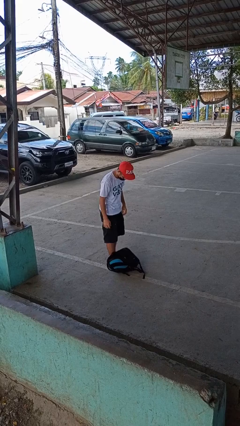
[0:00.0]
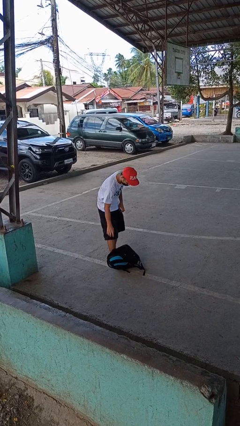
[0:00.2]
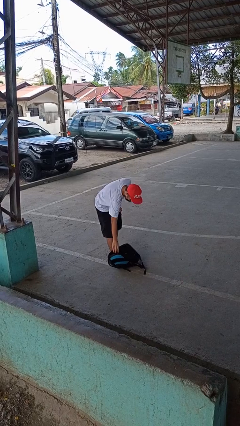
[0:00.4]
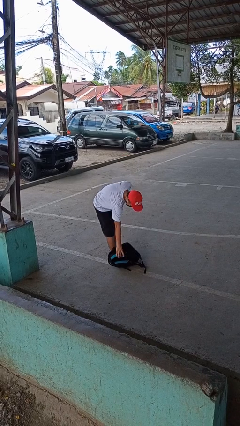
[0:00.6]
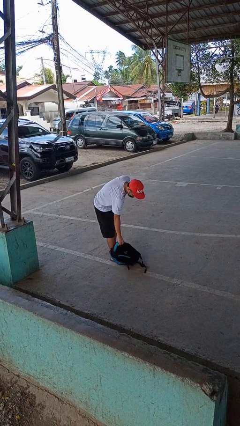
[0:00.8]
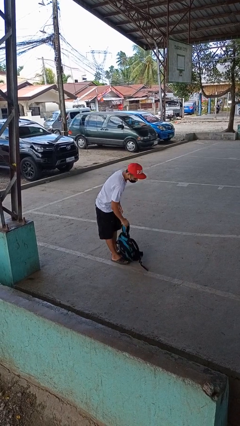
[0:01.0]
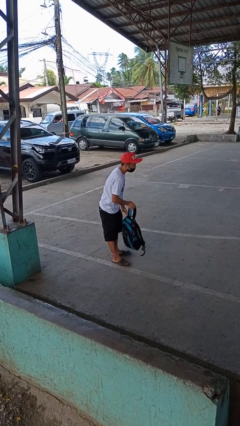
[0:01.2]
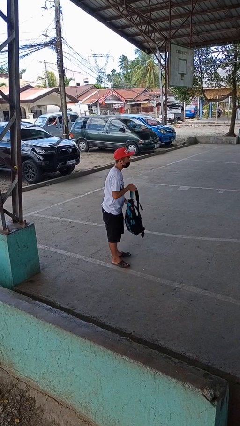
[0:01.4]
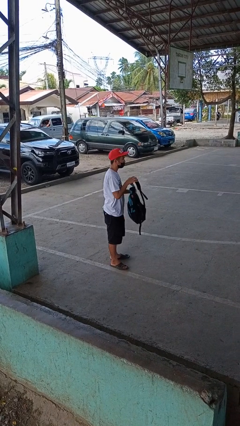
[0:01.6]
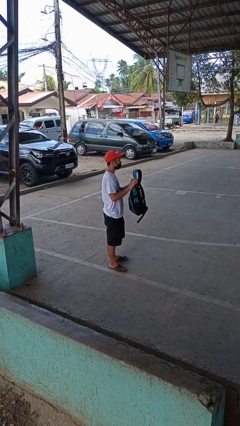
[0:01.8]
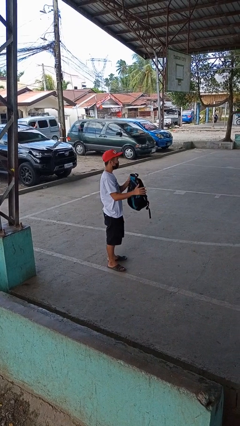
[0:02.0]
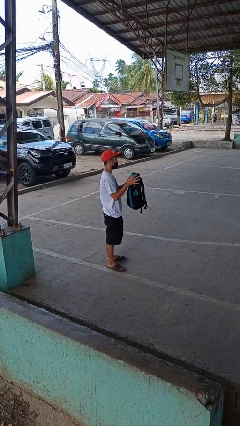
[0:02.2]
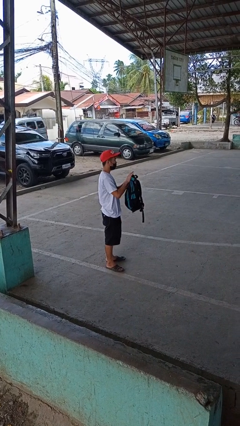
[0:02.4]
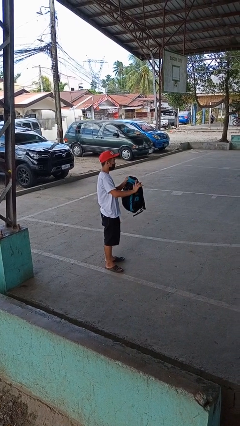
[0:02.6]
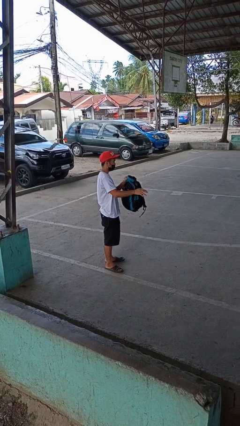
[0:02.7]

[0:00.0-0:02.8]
person picks up object from floor

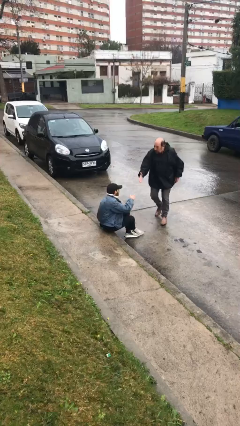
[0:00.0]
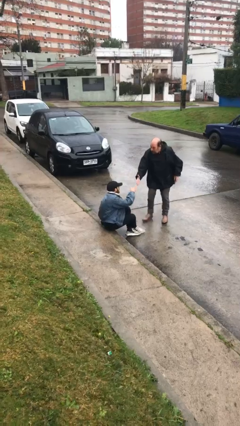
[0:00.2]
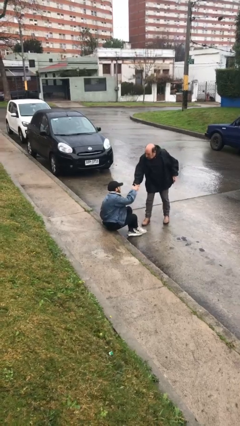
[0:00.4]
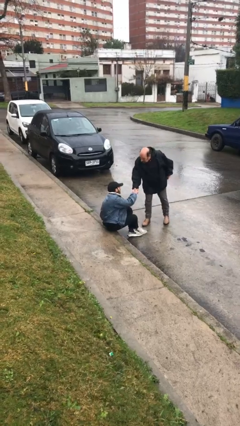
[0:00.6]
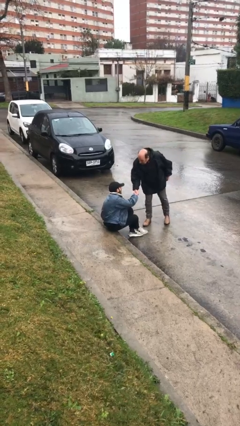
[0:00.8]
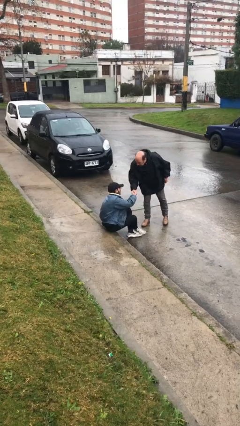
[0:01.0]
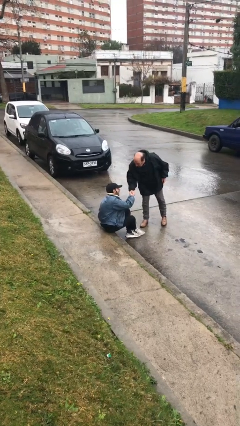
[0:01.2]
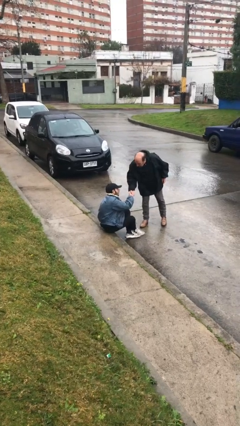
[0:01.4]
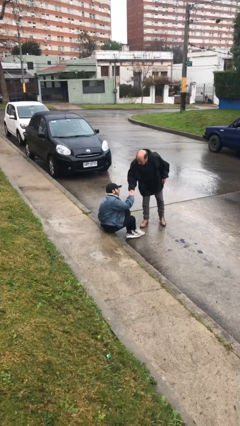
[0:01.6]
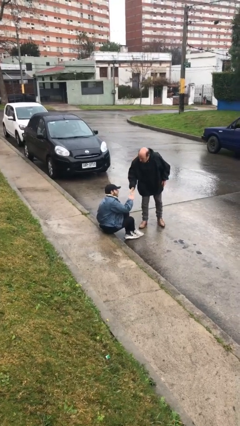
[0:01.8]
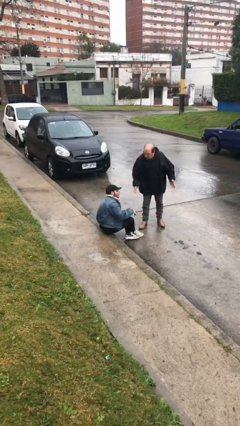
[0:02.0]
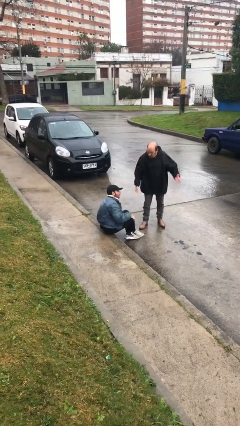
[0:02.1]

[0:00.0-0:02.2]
person shakes hand

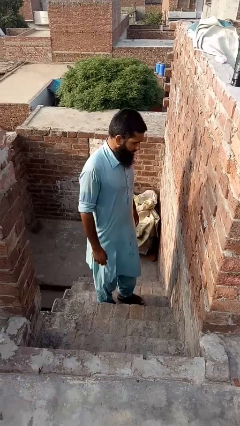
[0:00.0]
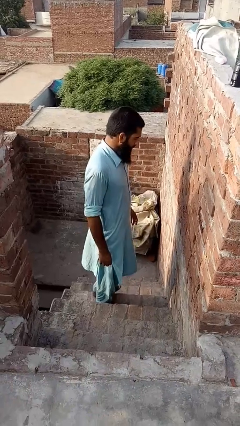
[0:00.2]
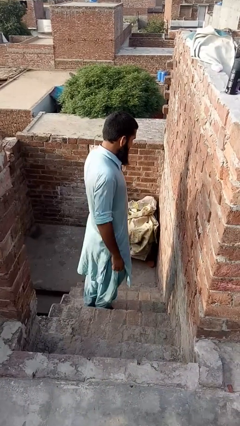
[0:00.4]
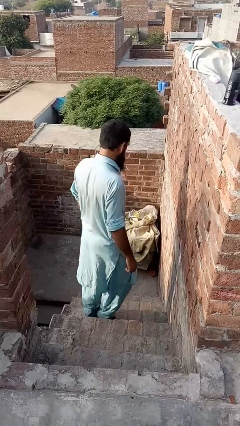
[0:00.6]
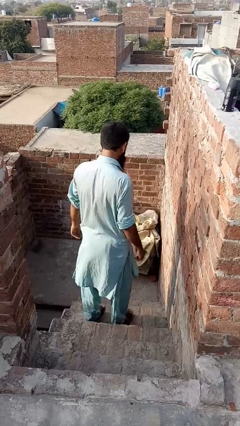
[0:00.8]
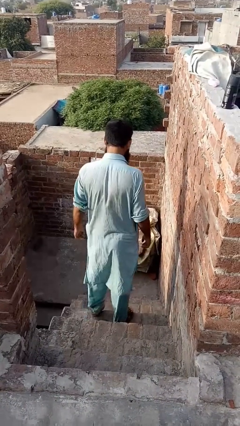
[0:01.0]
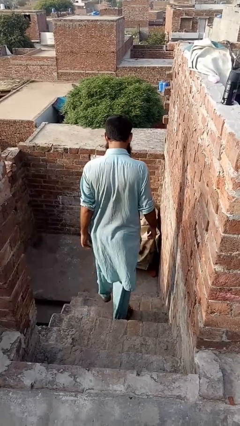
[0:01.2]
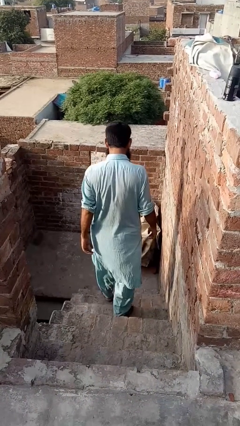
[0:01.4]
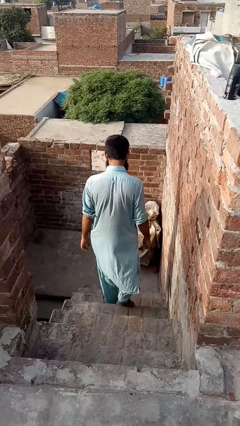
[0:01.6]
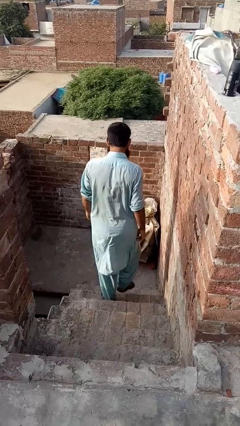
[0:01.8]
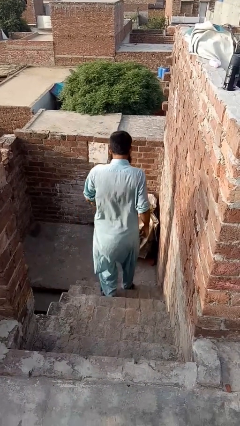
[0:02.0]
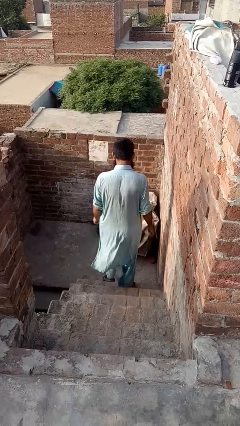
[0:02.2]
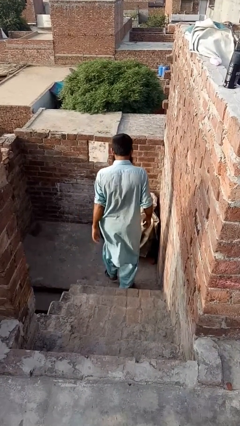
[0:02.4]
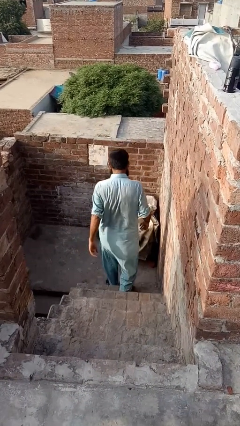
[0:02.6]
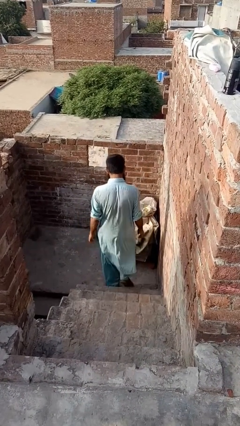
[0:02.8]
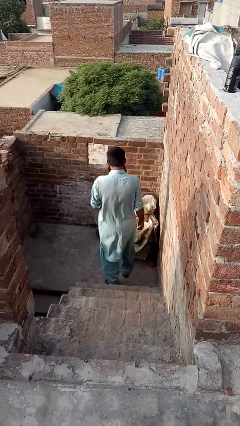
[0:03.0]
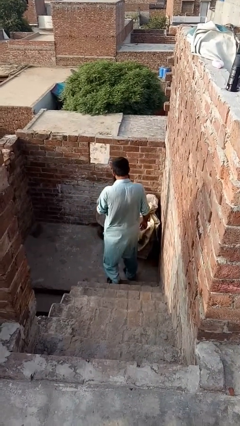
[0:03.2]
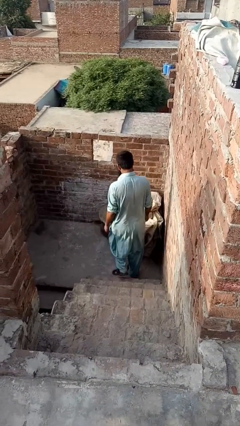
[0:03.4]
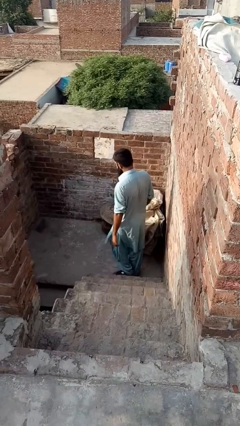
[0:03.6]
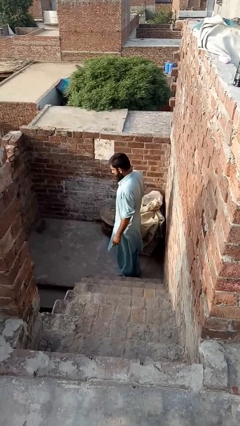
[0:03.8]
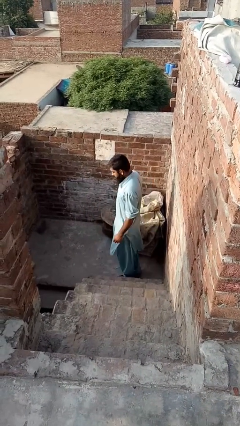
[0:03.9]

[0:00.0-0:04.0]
person climbs down stairs

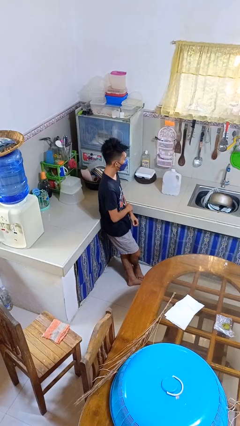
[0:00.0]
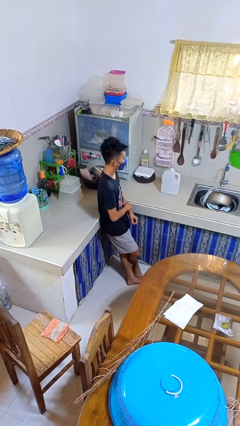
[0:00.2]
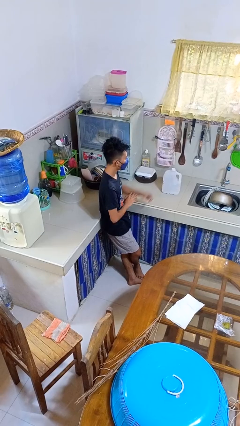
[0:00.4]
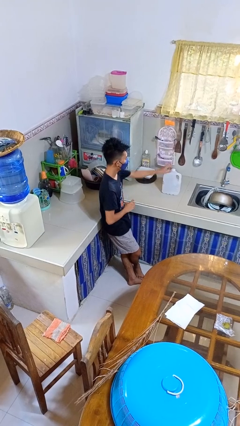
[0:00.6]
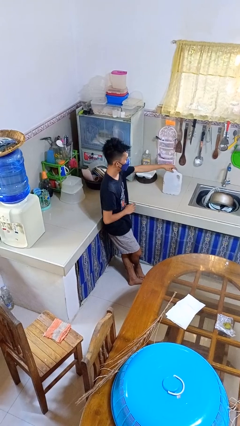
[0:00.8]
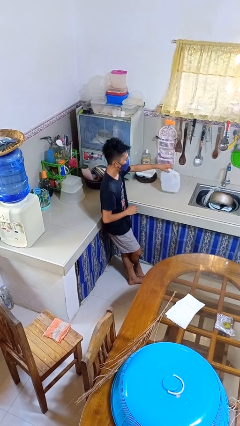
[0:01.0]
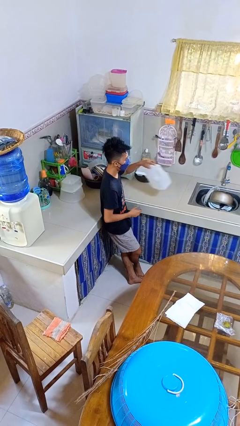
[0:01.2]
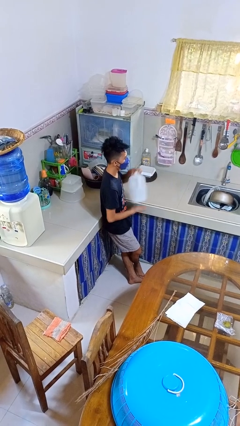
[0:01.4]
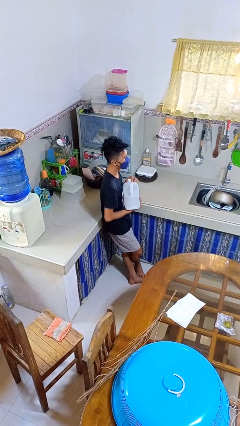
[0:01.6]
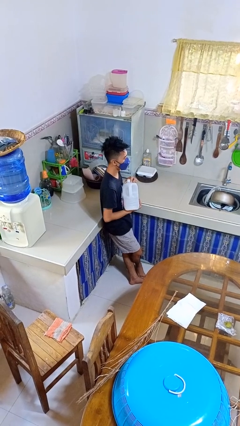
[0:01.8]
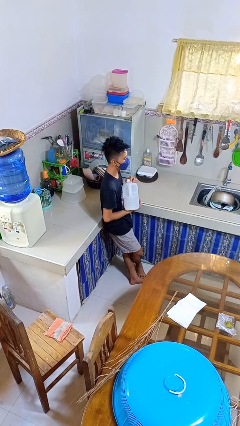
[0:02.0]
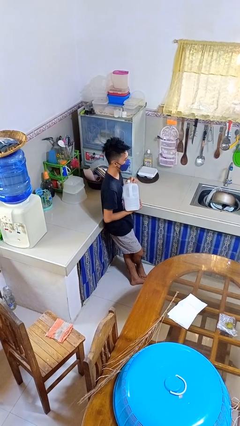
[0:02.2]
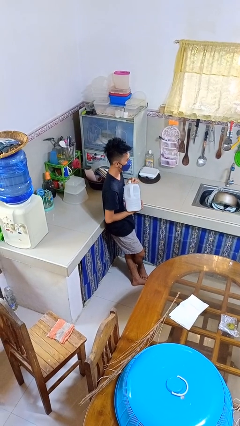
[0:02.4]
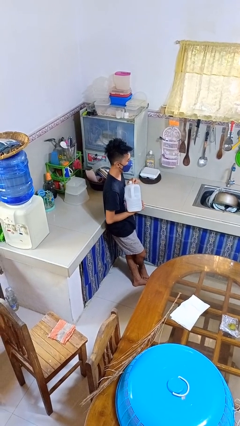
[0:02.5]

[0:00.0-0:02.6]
person picks up object from countertop

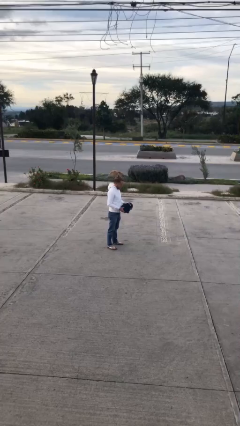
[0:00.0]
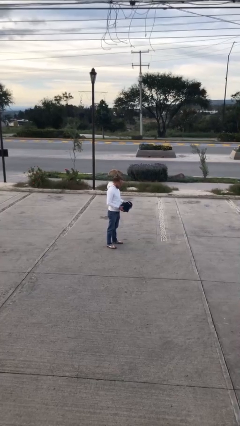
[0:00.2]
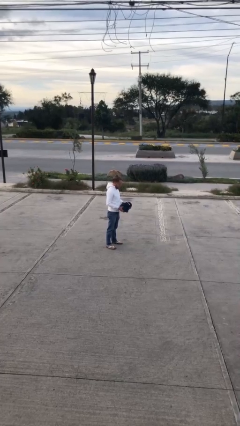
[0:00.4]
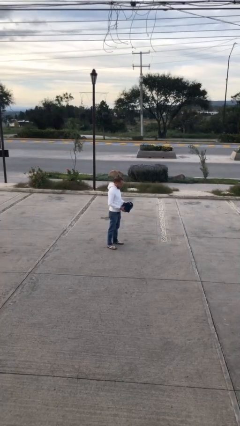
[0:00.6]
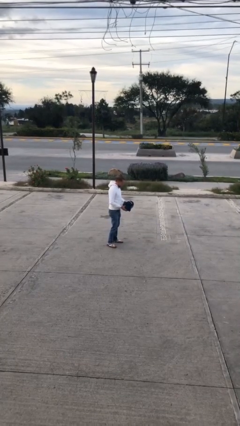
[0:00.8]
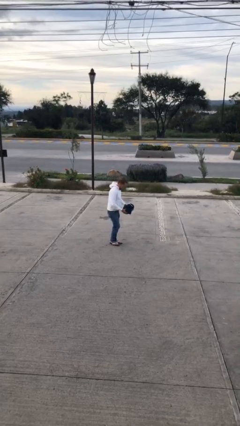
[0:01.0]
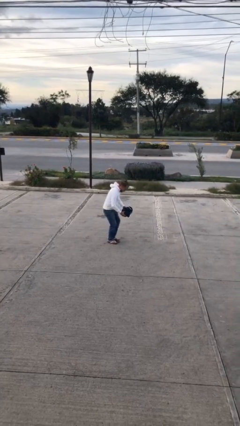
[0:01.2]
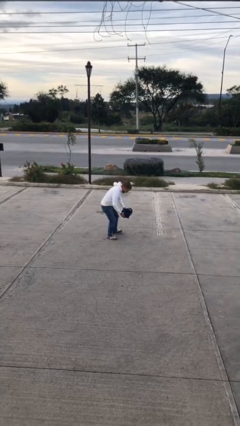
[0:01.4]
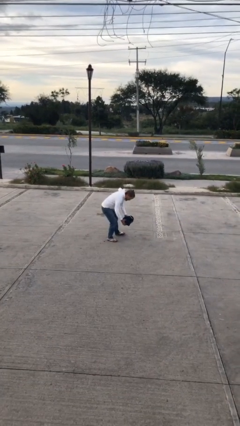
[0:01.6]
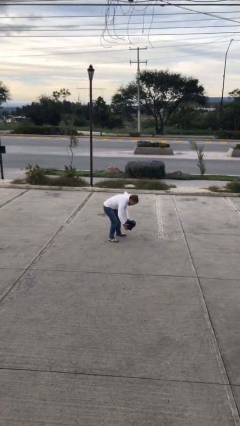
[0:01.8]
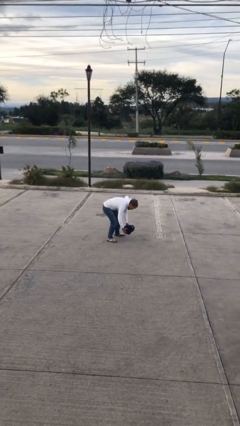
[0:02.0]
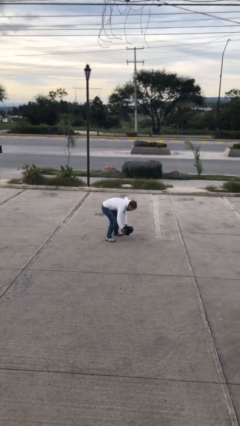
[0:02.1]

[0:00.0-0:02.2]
person puts down object on floor

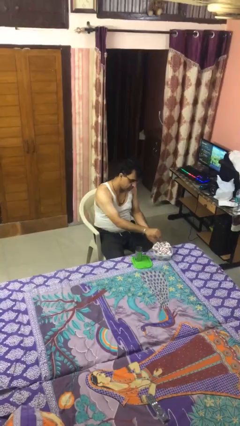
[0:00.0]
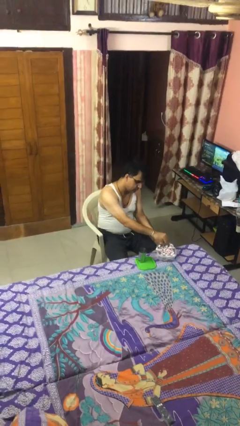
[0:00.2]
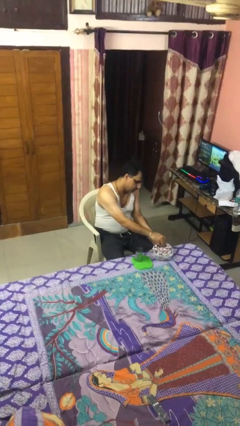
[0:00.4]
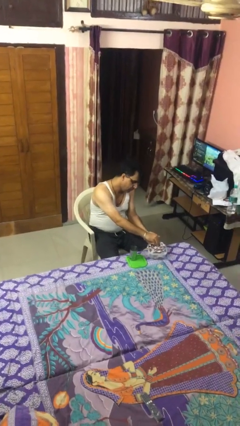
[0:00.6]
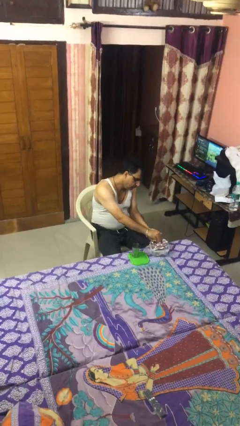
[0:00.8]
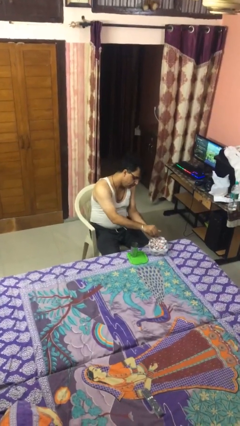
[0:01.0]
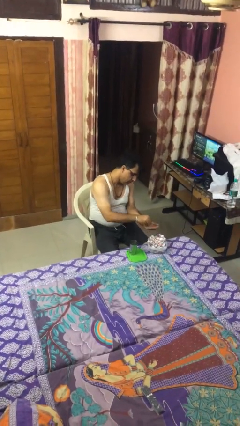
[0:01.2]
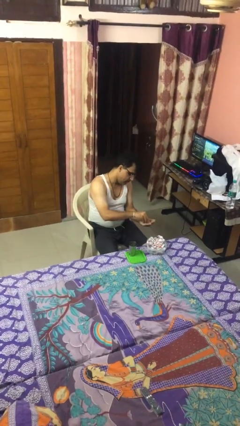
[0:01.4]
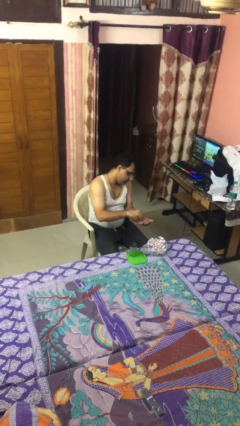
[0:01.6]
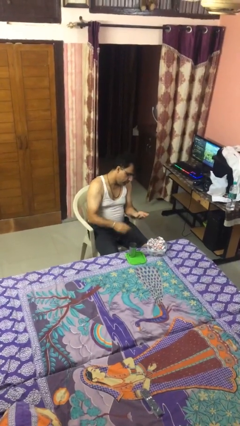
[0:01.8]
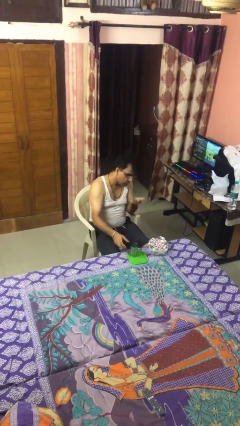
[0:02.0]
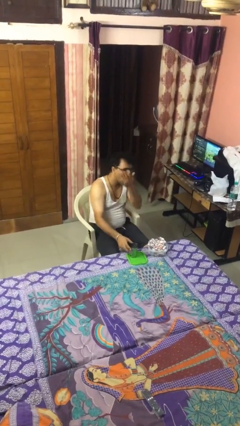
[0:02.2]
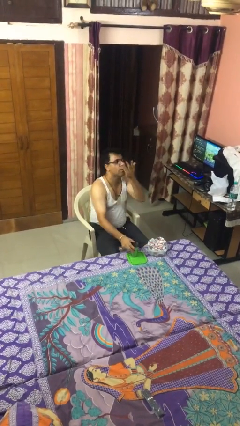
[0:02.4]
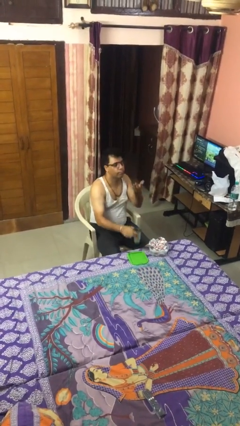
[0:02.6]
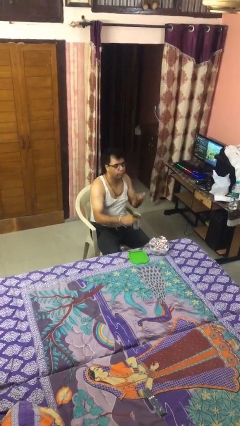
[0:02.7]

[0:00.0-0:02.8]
person takes medicine pills

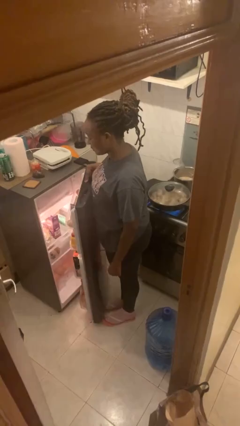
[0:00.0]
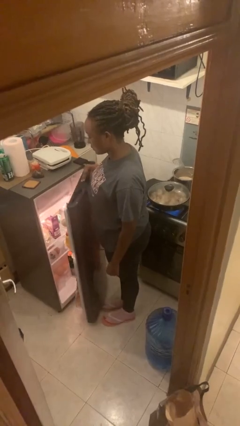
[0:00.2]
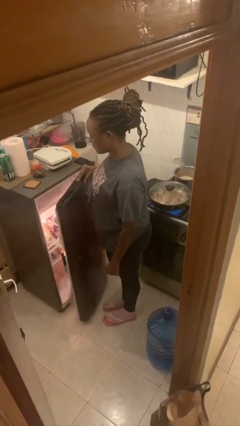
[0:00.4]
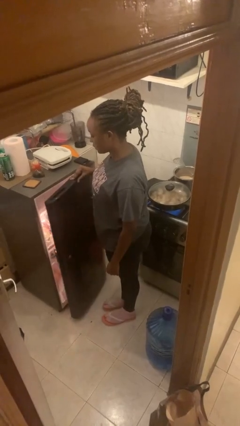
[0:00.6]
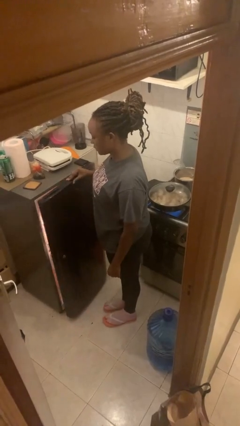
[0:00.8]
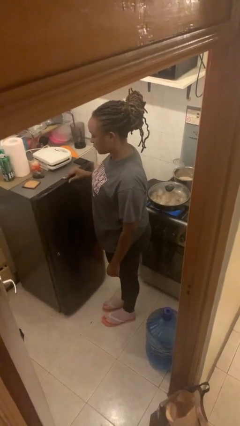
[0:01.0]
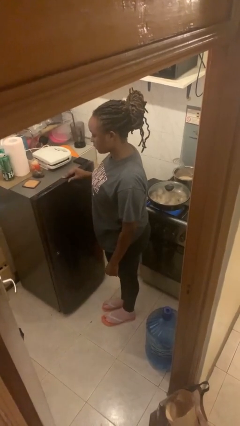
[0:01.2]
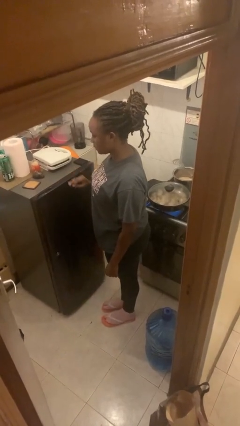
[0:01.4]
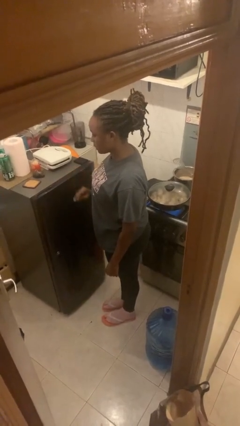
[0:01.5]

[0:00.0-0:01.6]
person closes refrigerator
